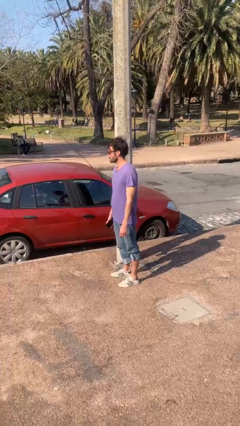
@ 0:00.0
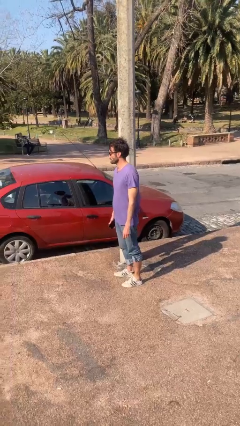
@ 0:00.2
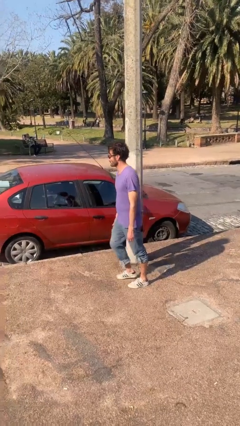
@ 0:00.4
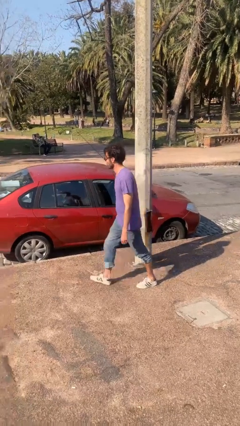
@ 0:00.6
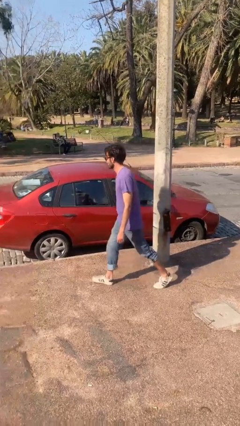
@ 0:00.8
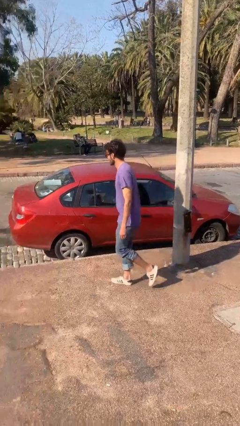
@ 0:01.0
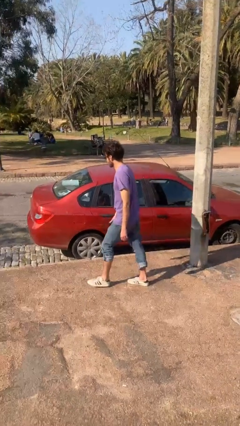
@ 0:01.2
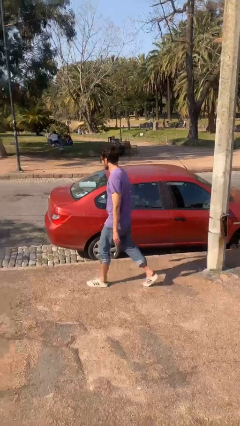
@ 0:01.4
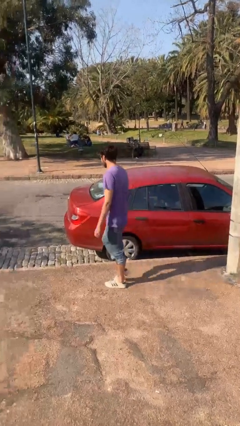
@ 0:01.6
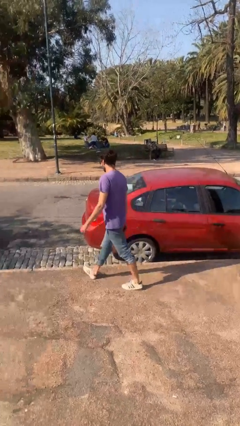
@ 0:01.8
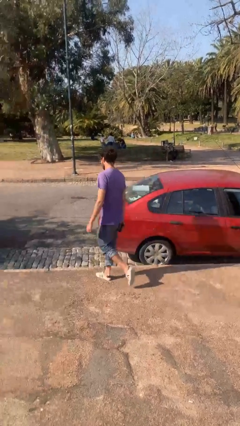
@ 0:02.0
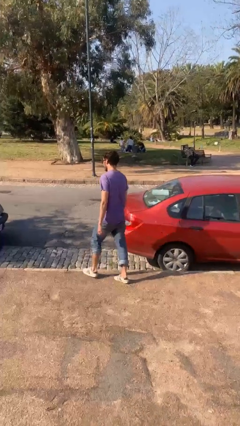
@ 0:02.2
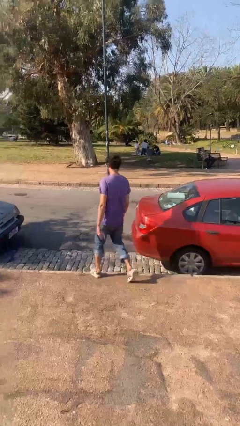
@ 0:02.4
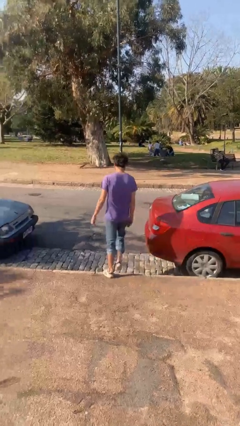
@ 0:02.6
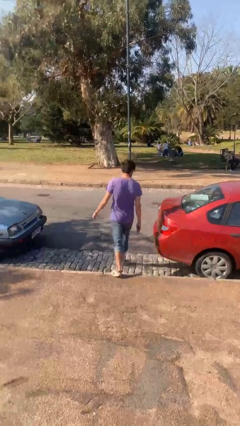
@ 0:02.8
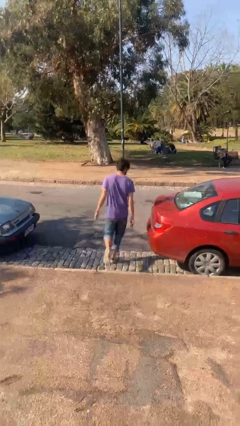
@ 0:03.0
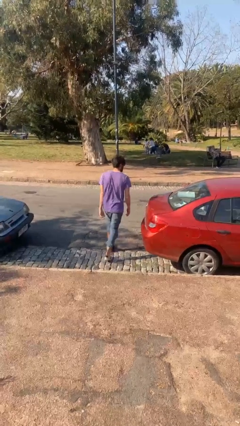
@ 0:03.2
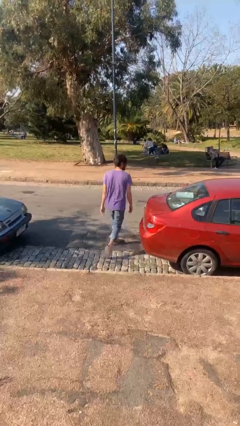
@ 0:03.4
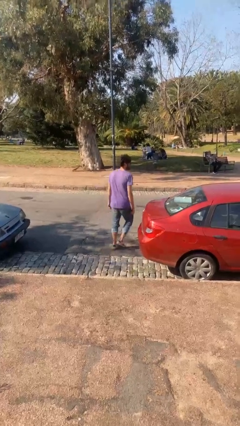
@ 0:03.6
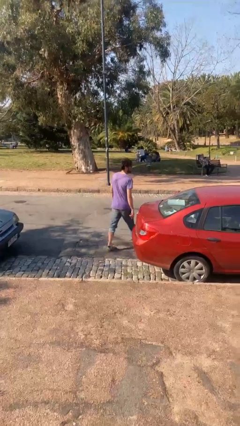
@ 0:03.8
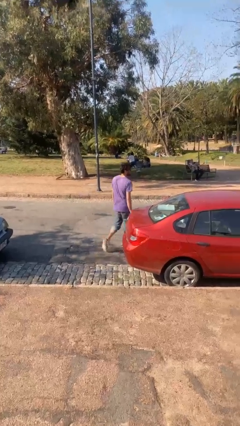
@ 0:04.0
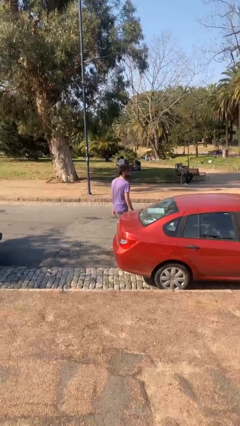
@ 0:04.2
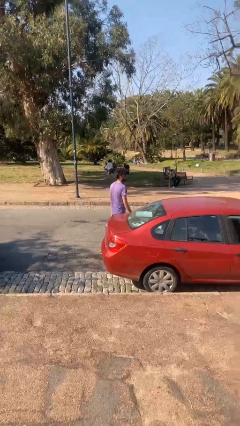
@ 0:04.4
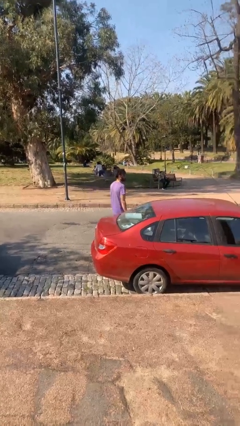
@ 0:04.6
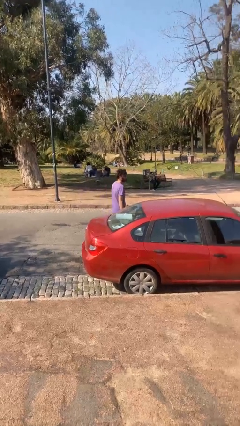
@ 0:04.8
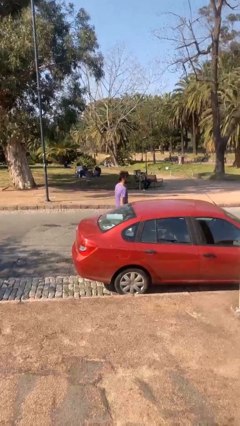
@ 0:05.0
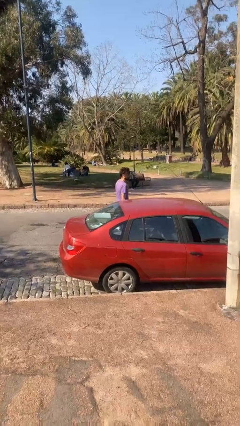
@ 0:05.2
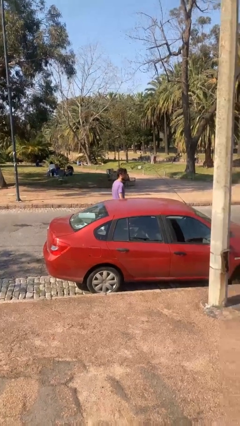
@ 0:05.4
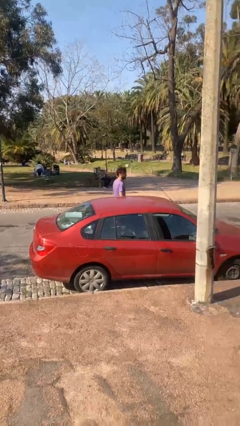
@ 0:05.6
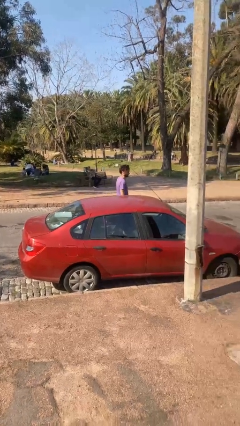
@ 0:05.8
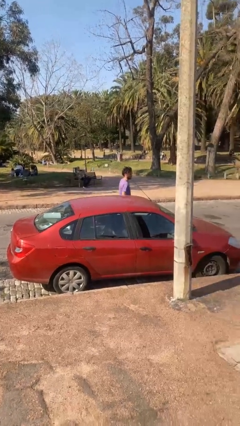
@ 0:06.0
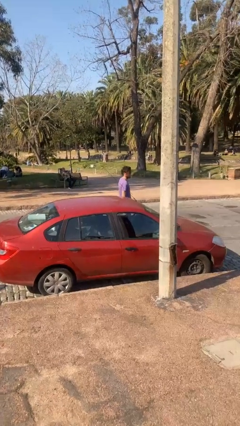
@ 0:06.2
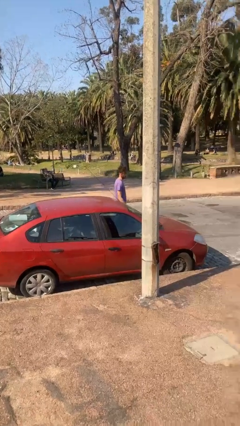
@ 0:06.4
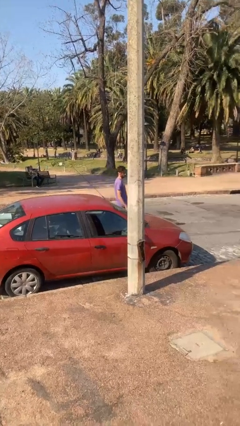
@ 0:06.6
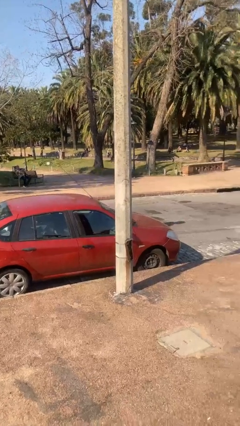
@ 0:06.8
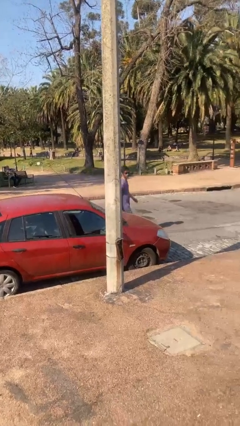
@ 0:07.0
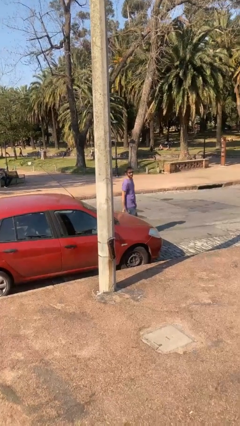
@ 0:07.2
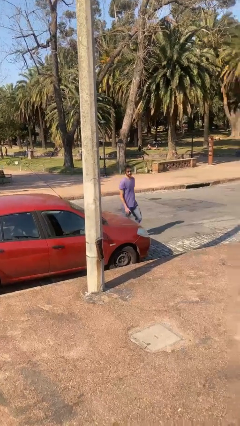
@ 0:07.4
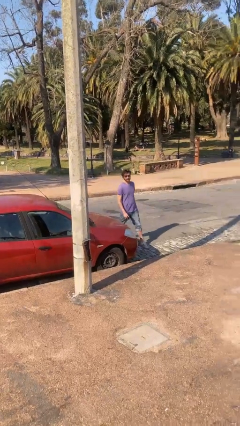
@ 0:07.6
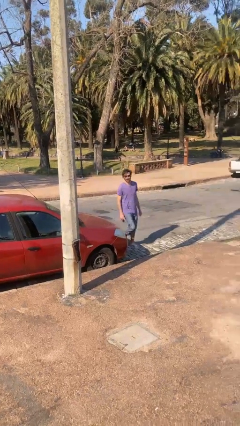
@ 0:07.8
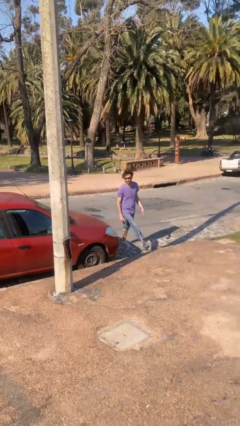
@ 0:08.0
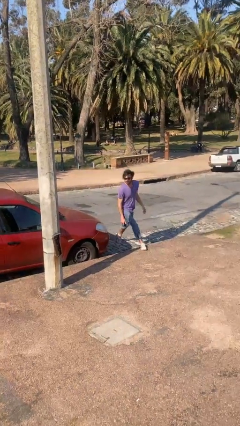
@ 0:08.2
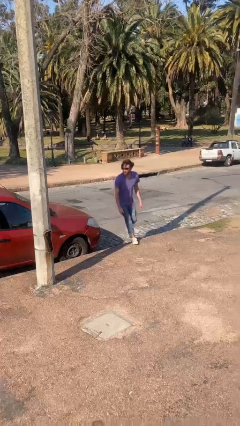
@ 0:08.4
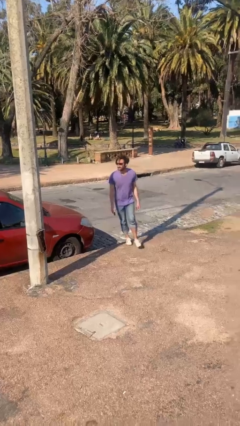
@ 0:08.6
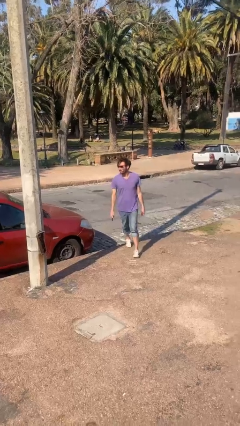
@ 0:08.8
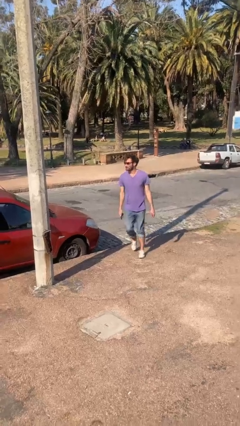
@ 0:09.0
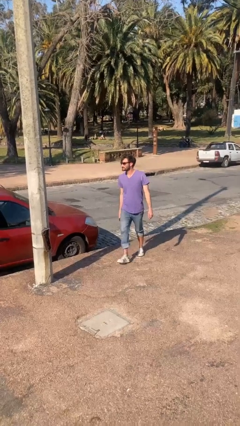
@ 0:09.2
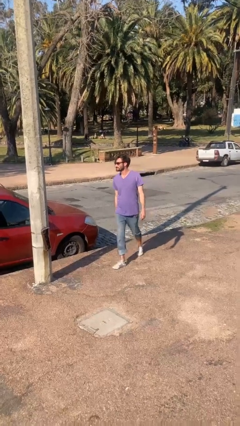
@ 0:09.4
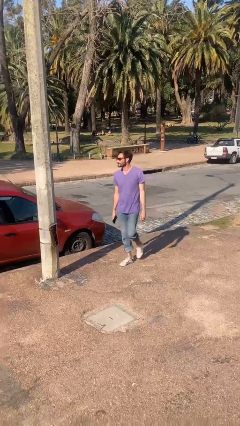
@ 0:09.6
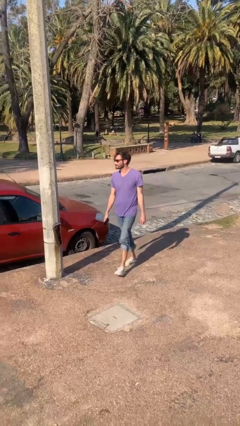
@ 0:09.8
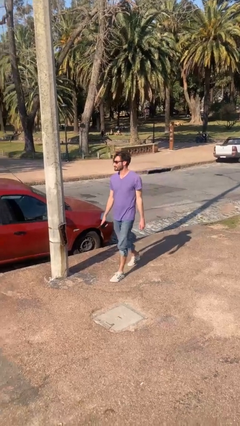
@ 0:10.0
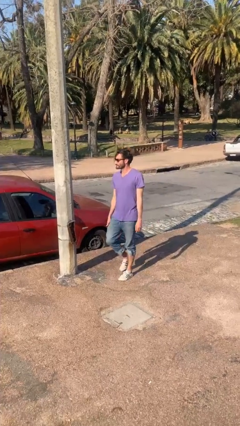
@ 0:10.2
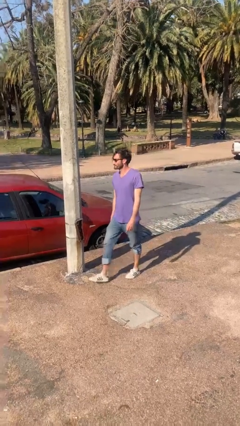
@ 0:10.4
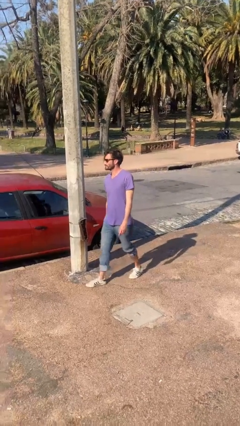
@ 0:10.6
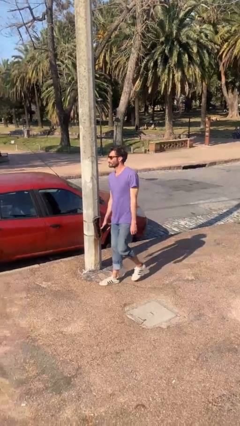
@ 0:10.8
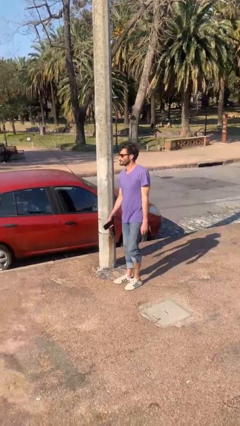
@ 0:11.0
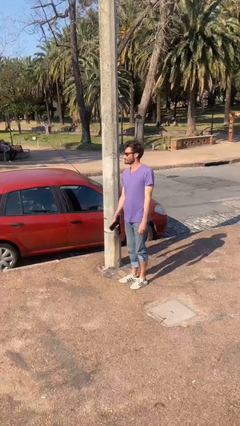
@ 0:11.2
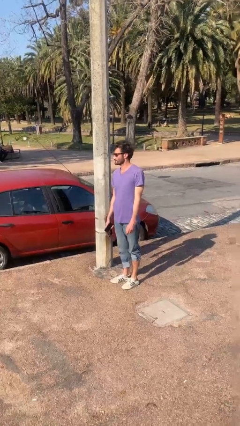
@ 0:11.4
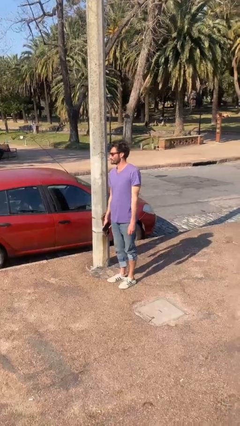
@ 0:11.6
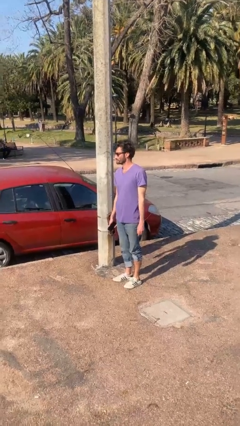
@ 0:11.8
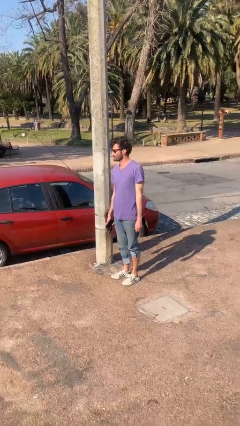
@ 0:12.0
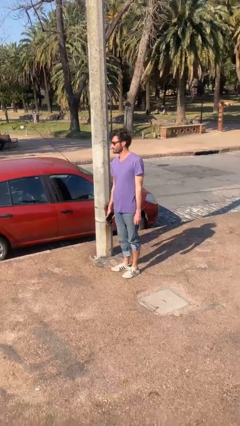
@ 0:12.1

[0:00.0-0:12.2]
person walks around car

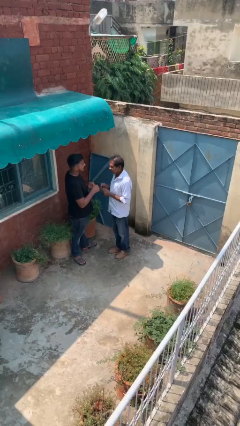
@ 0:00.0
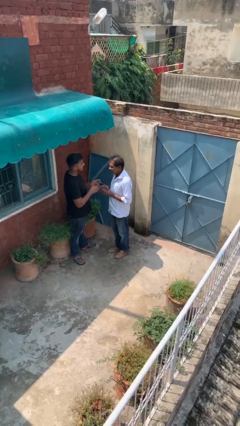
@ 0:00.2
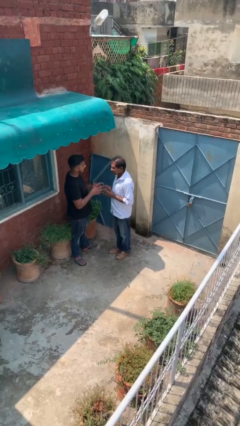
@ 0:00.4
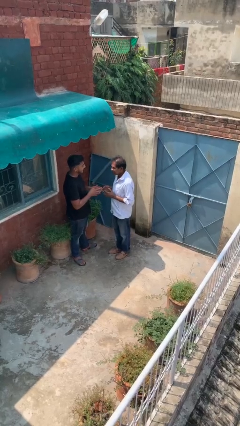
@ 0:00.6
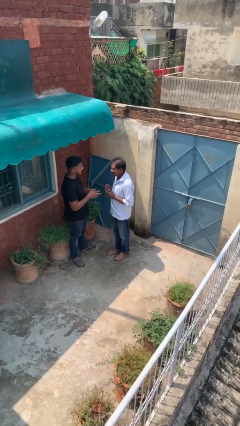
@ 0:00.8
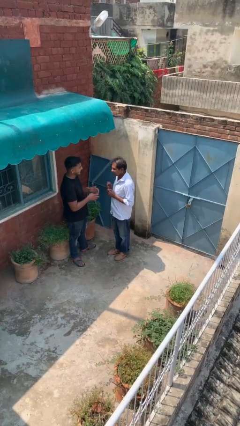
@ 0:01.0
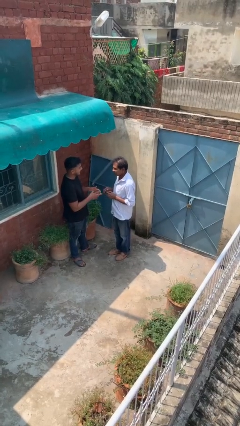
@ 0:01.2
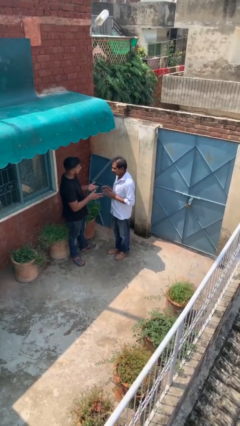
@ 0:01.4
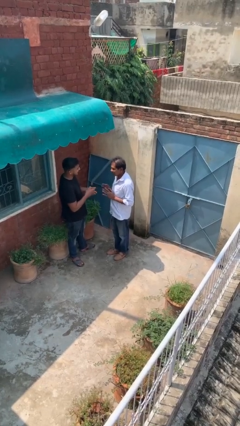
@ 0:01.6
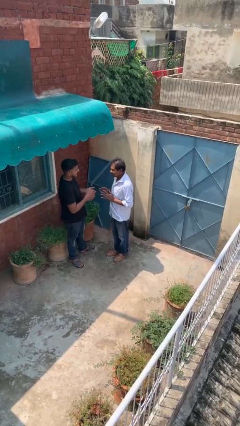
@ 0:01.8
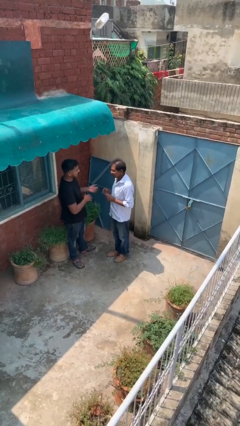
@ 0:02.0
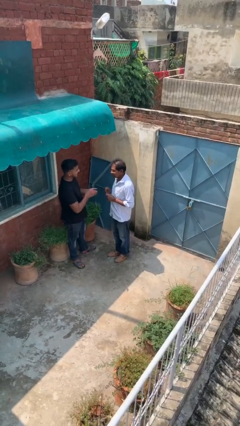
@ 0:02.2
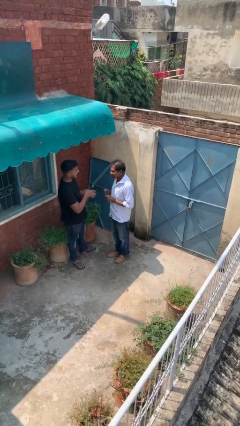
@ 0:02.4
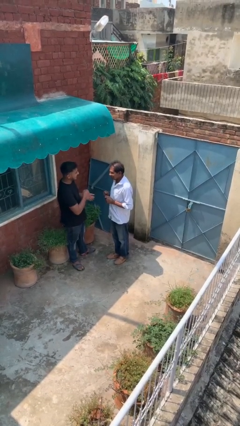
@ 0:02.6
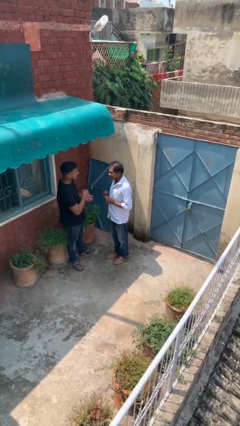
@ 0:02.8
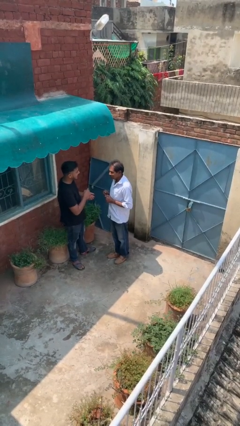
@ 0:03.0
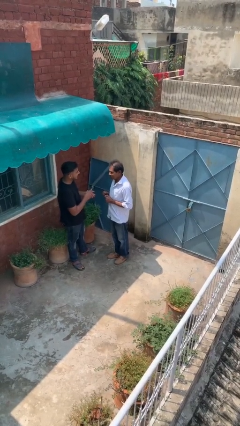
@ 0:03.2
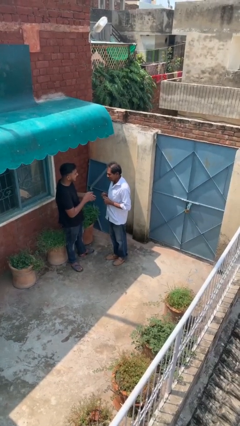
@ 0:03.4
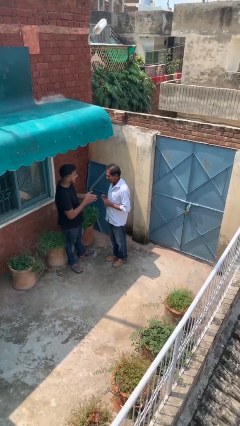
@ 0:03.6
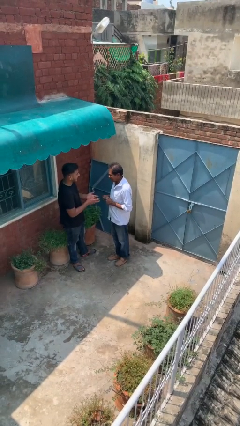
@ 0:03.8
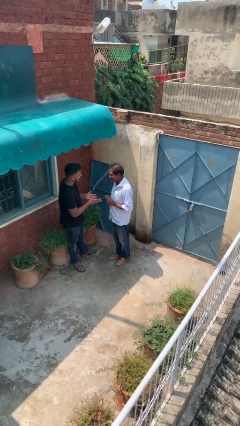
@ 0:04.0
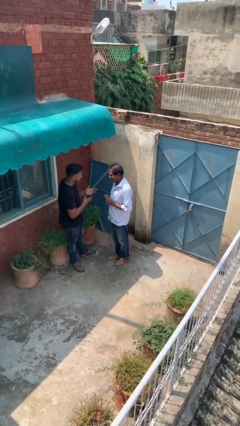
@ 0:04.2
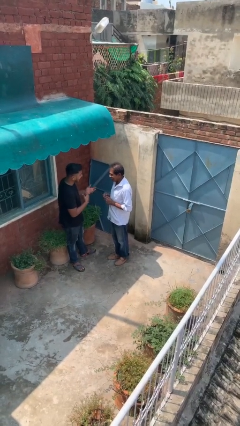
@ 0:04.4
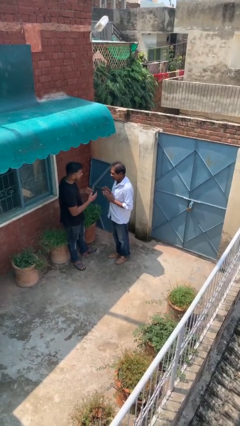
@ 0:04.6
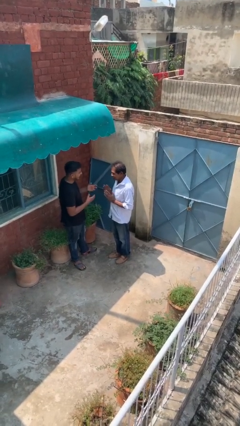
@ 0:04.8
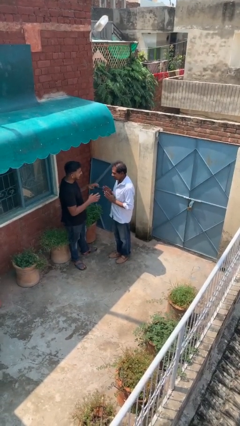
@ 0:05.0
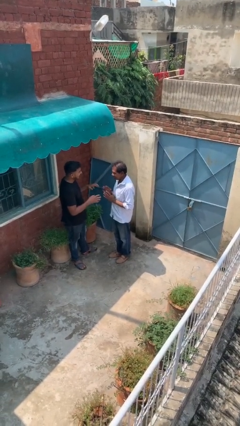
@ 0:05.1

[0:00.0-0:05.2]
person talks to person

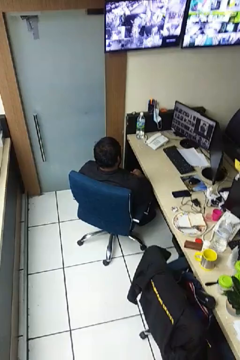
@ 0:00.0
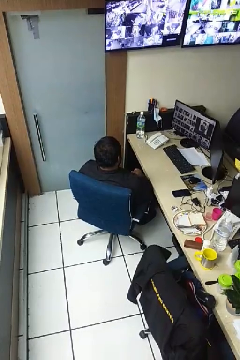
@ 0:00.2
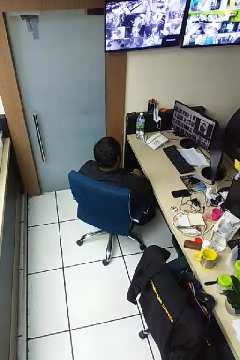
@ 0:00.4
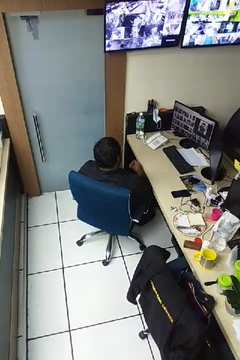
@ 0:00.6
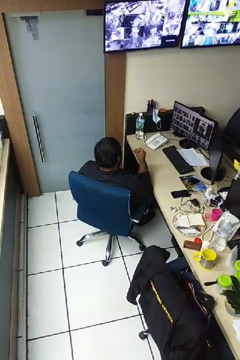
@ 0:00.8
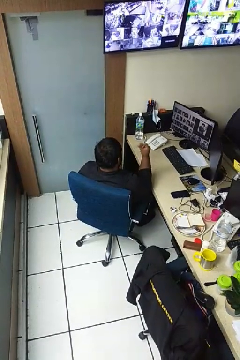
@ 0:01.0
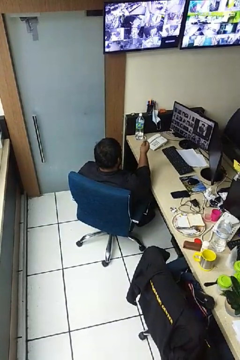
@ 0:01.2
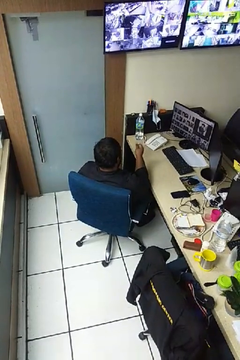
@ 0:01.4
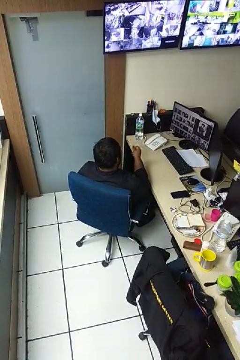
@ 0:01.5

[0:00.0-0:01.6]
person snaps fingers
